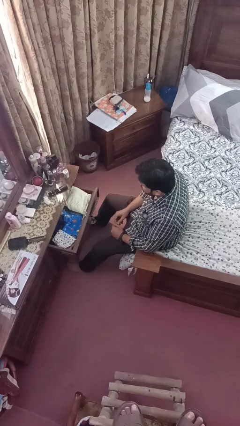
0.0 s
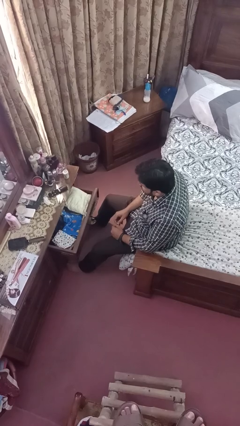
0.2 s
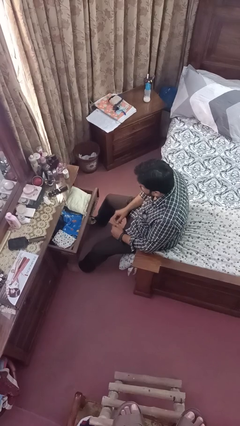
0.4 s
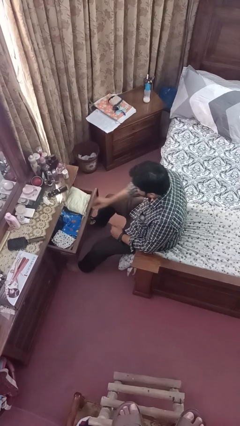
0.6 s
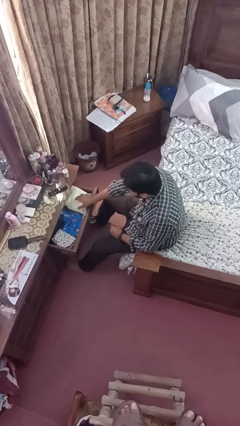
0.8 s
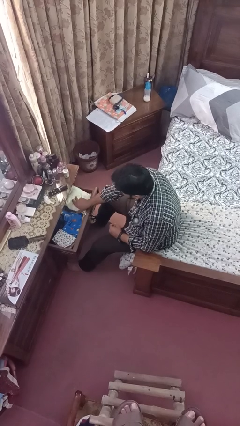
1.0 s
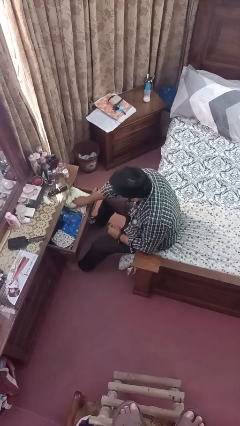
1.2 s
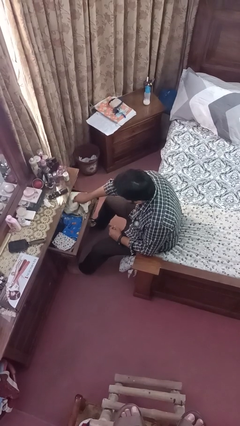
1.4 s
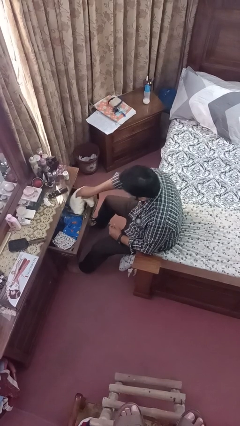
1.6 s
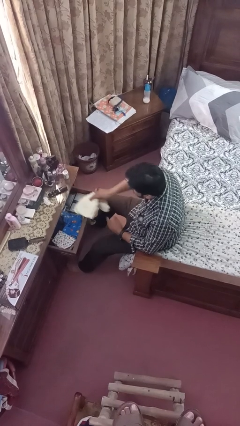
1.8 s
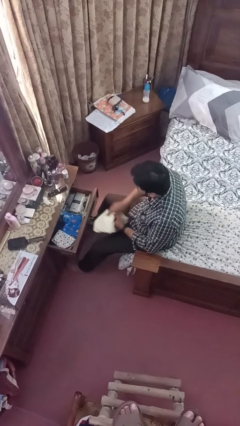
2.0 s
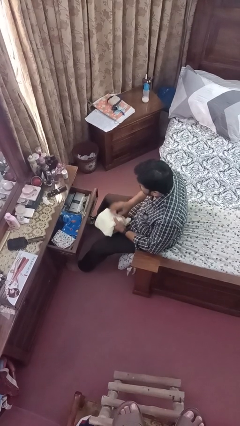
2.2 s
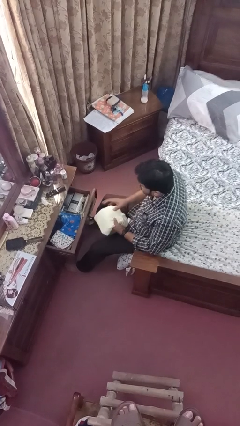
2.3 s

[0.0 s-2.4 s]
person takes clothes from dresser

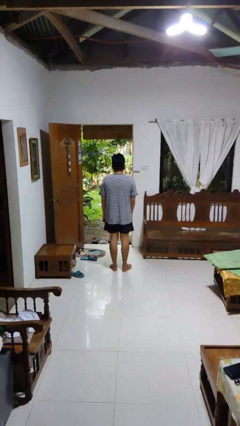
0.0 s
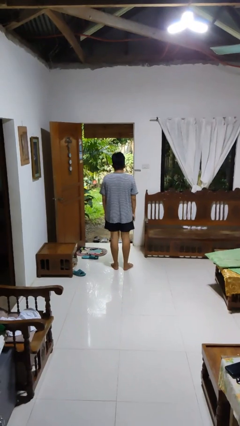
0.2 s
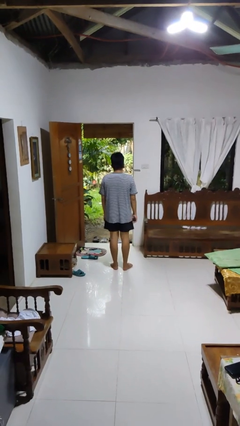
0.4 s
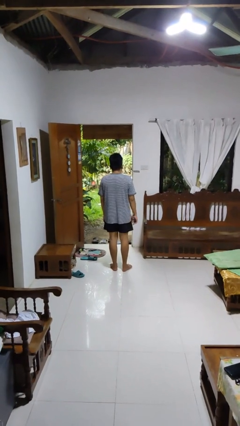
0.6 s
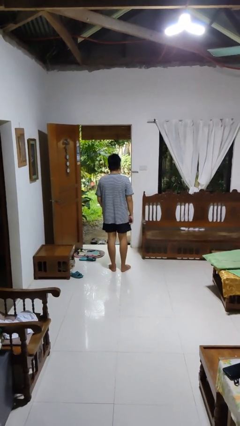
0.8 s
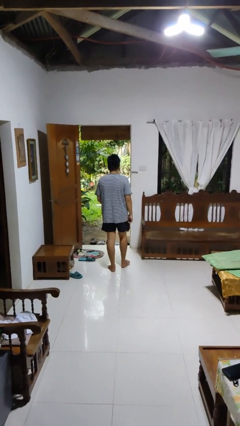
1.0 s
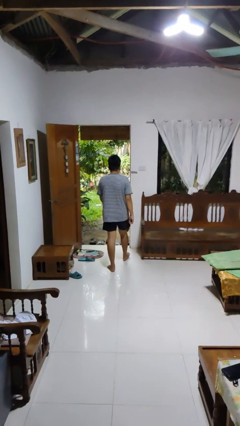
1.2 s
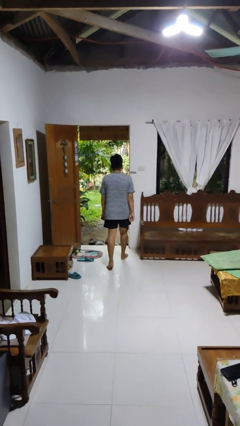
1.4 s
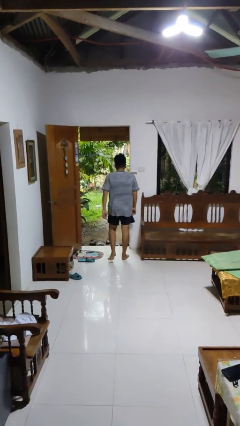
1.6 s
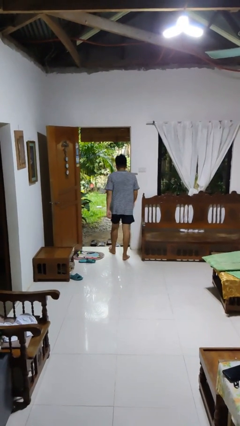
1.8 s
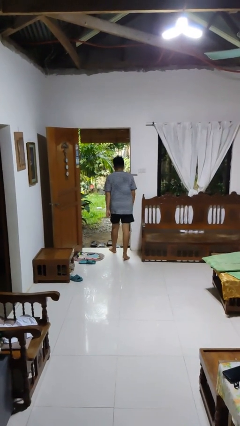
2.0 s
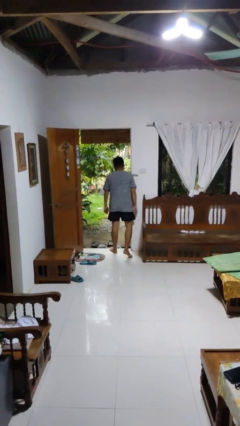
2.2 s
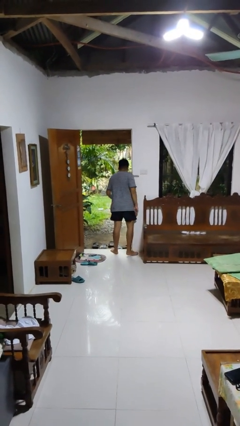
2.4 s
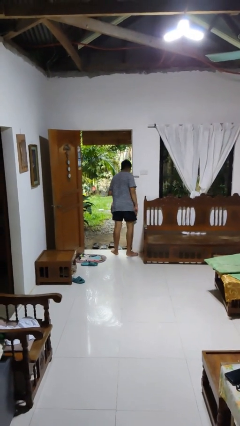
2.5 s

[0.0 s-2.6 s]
person bumps into wall

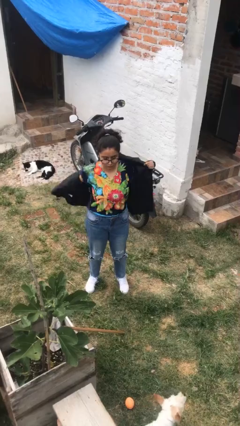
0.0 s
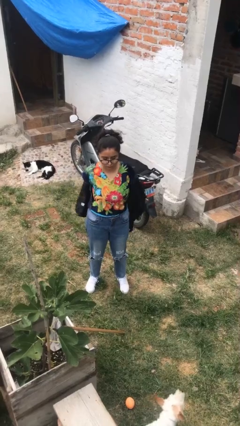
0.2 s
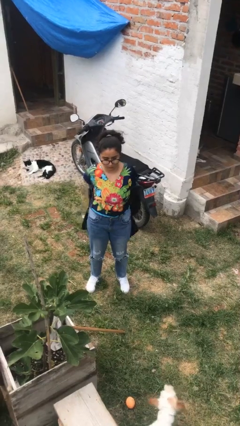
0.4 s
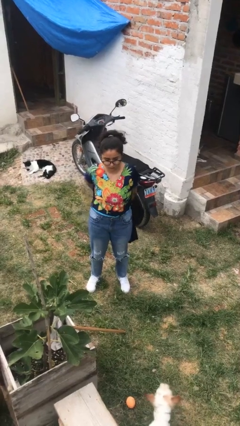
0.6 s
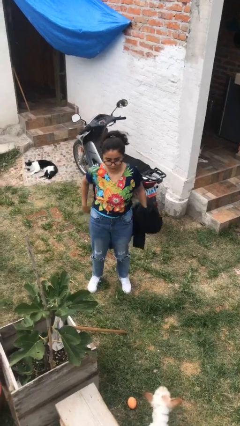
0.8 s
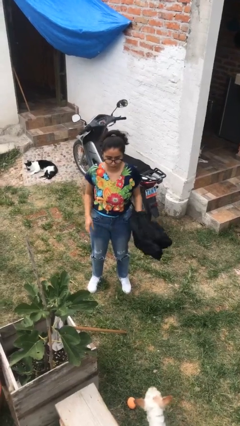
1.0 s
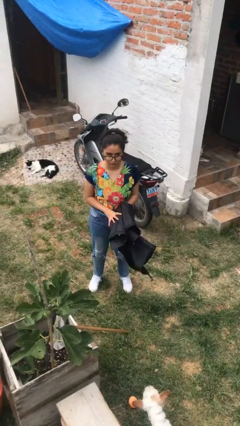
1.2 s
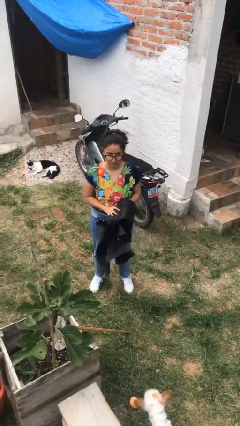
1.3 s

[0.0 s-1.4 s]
person takes off jacket

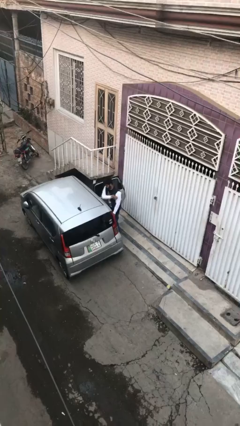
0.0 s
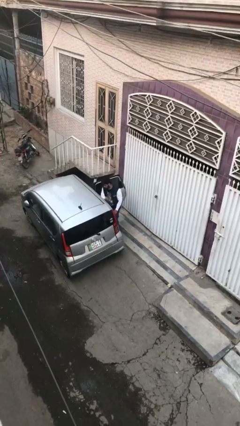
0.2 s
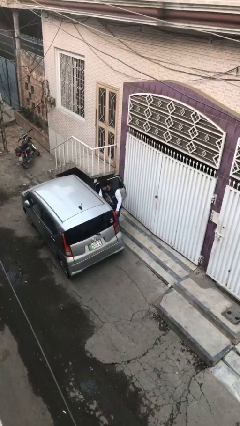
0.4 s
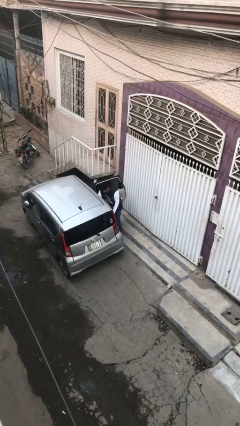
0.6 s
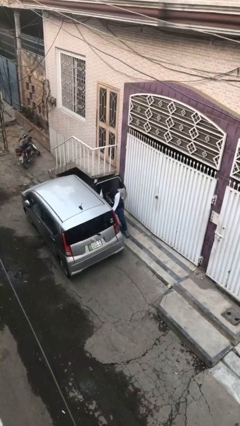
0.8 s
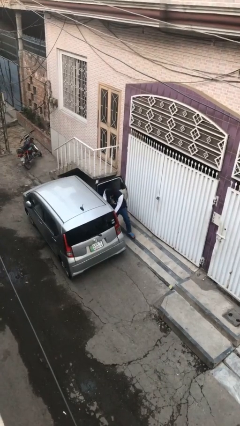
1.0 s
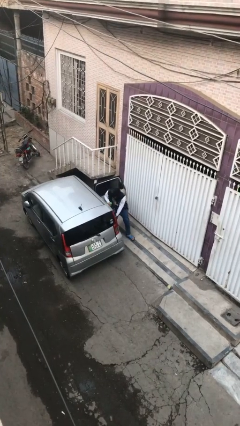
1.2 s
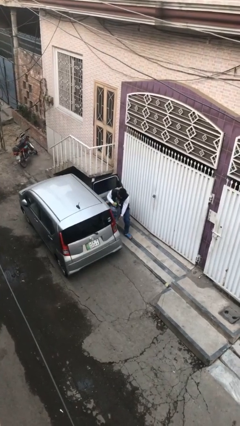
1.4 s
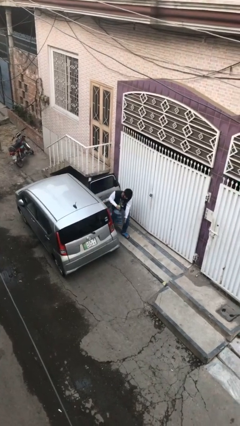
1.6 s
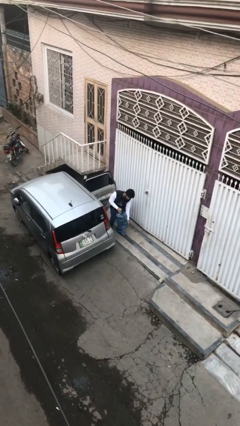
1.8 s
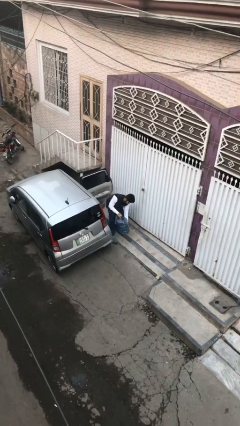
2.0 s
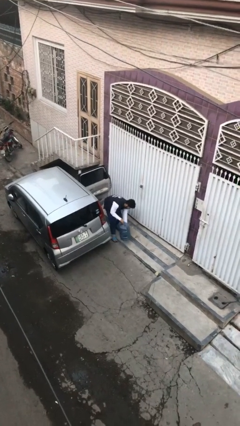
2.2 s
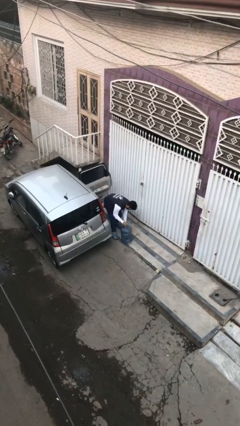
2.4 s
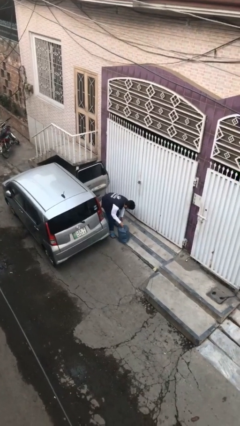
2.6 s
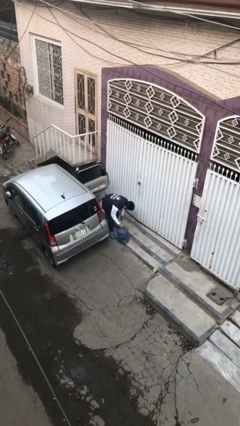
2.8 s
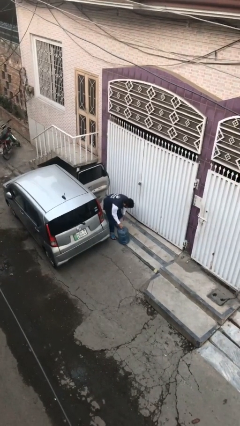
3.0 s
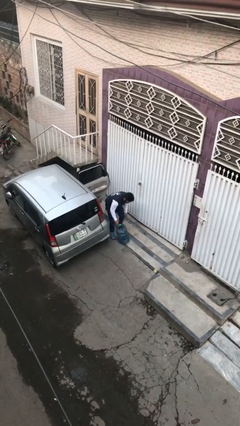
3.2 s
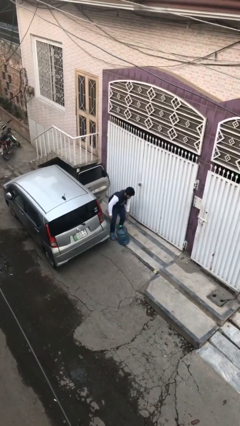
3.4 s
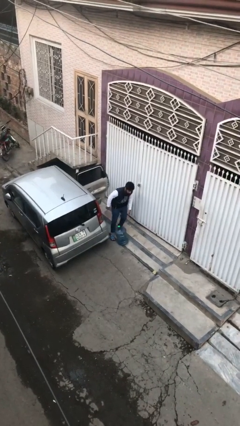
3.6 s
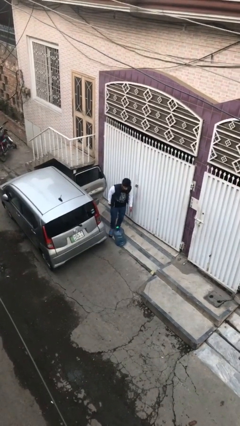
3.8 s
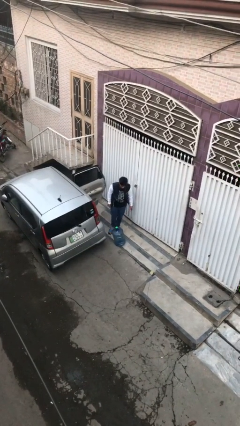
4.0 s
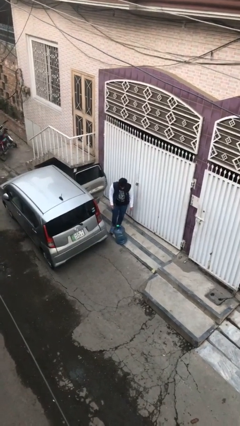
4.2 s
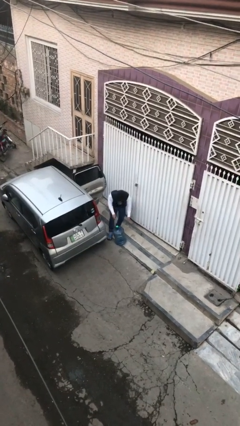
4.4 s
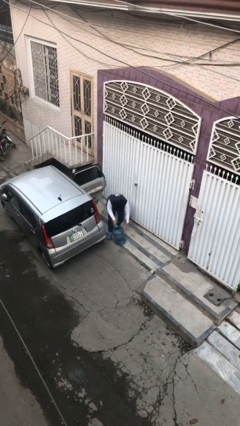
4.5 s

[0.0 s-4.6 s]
person unloads car

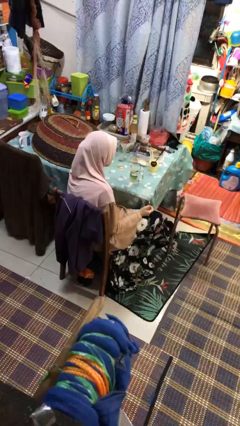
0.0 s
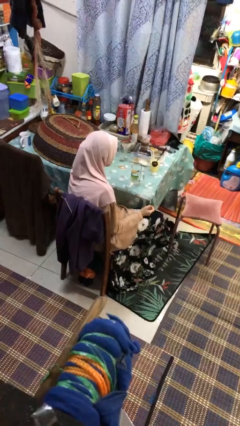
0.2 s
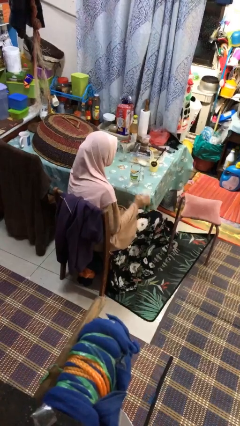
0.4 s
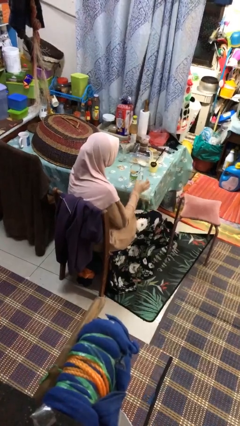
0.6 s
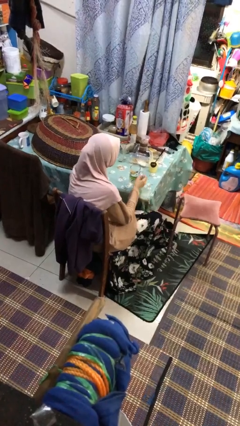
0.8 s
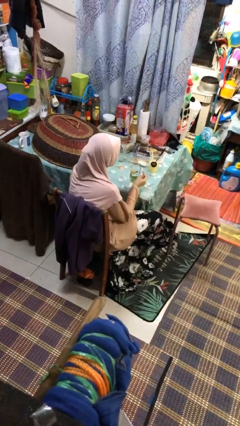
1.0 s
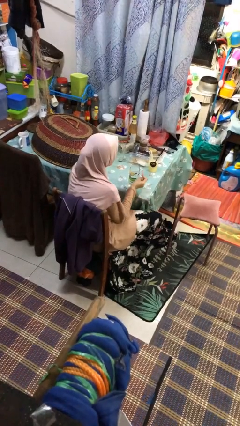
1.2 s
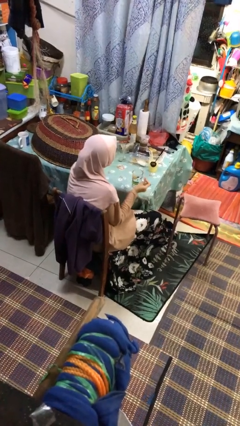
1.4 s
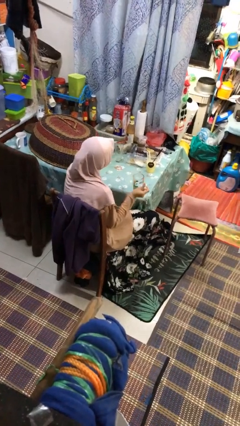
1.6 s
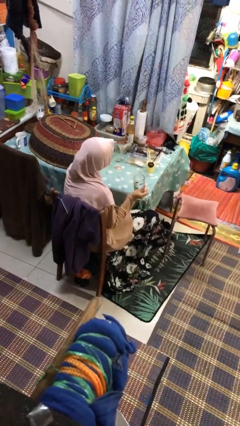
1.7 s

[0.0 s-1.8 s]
person picks up object from table

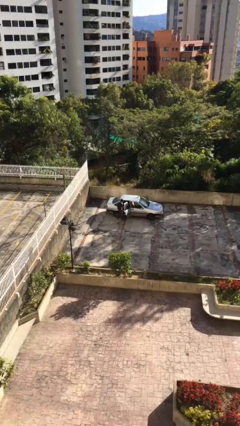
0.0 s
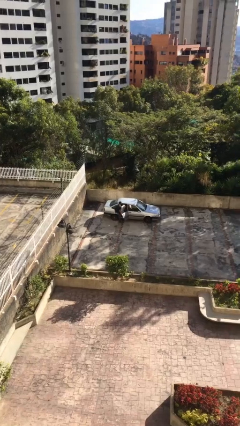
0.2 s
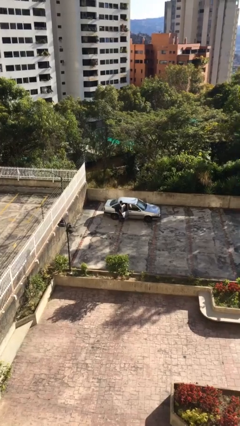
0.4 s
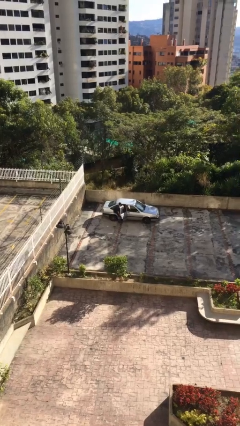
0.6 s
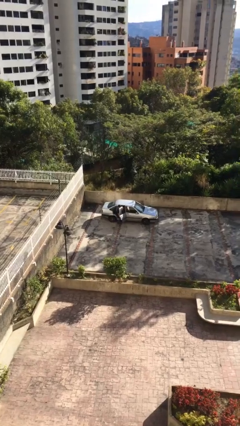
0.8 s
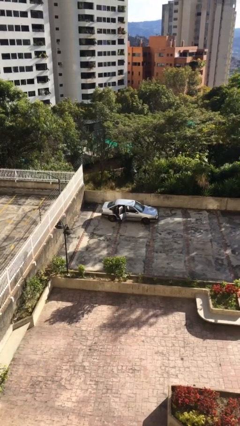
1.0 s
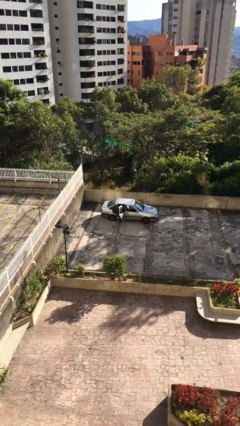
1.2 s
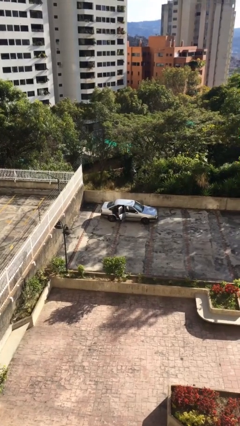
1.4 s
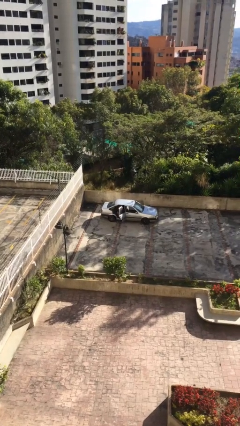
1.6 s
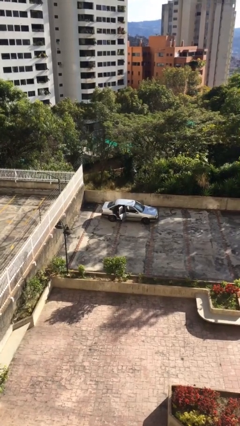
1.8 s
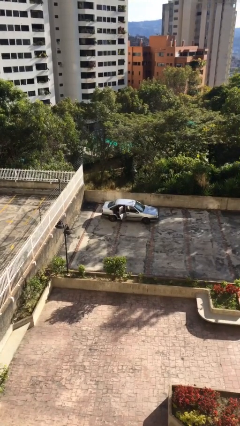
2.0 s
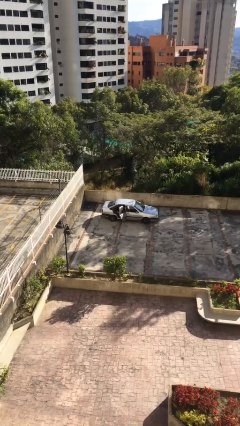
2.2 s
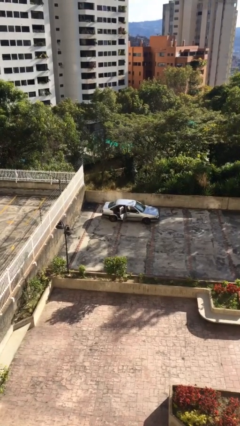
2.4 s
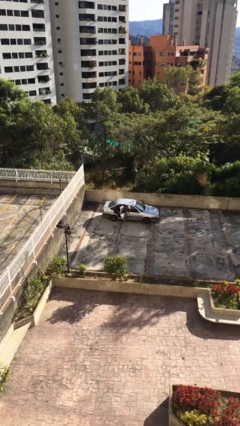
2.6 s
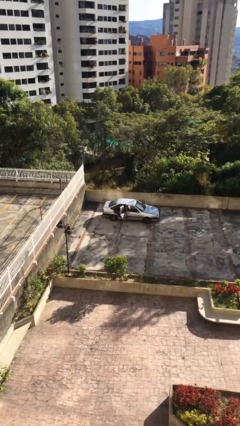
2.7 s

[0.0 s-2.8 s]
person enters car

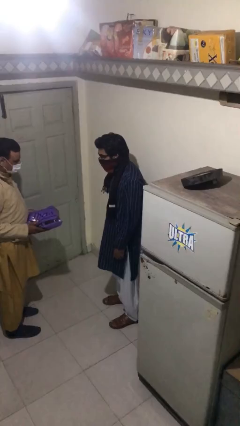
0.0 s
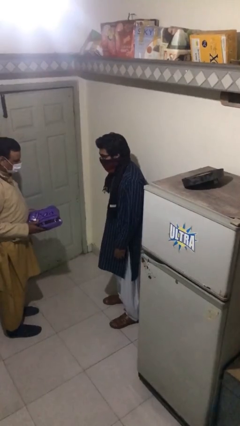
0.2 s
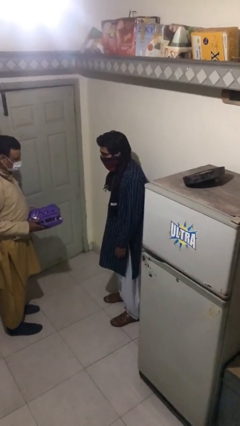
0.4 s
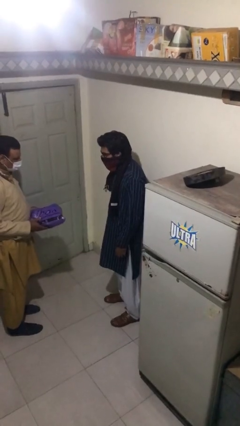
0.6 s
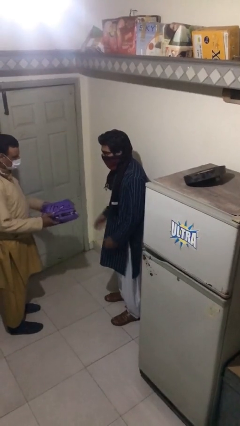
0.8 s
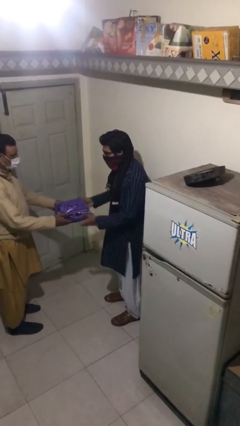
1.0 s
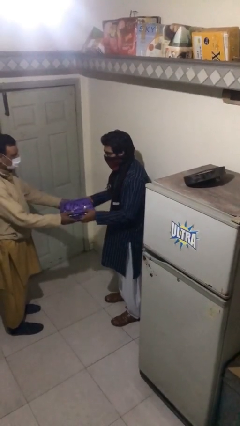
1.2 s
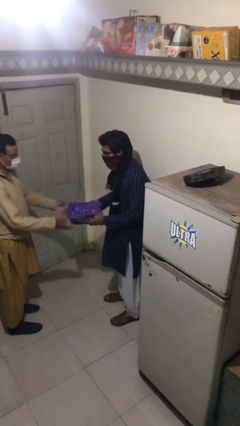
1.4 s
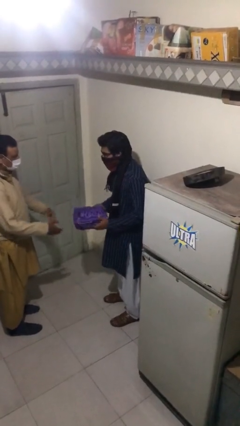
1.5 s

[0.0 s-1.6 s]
person transfers object to person
